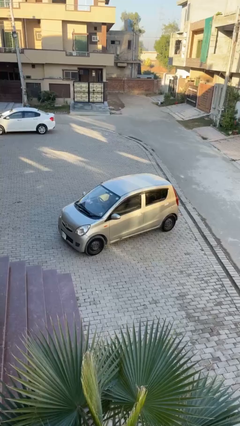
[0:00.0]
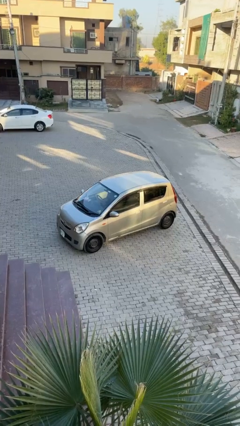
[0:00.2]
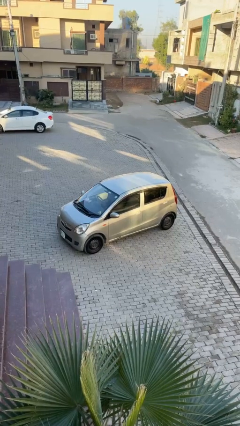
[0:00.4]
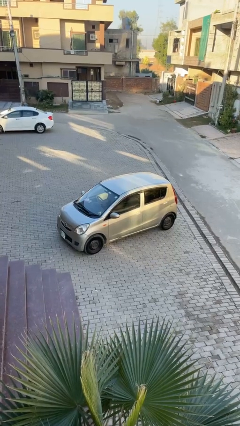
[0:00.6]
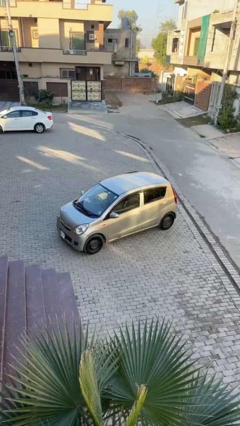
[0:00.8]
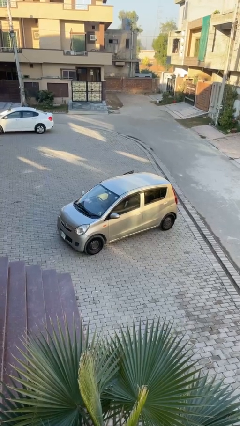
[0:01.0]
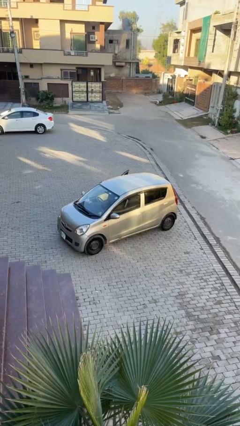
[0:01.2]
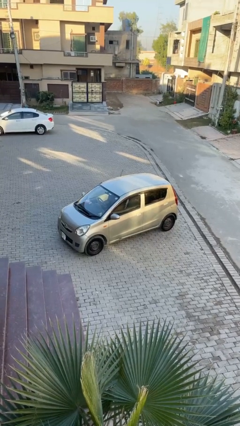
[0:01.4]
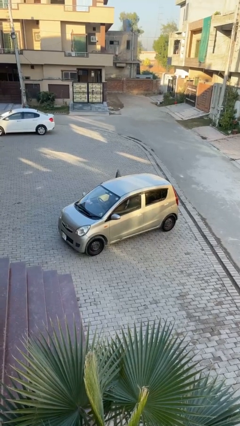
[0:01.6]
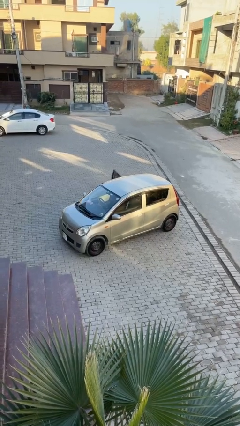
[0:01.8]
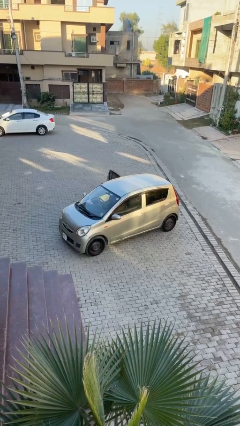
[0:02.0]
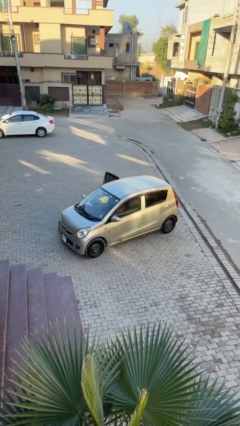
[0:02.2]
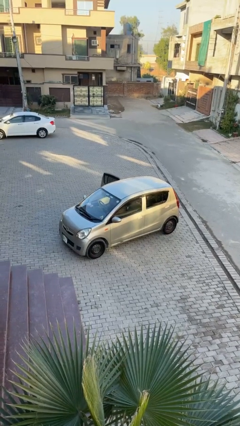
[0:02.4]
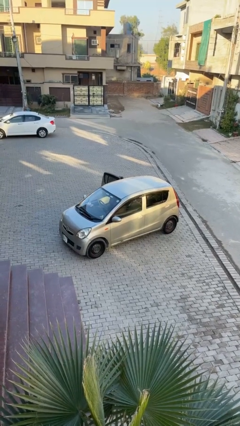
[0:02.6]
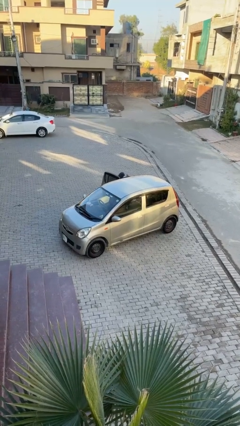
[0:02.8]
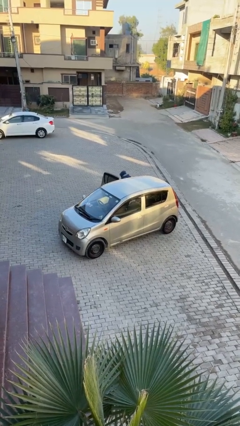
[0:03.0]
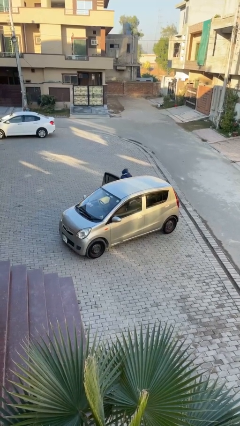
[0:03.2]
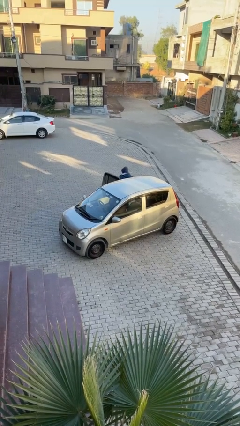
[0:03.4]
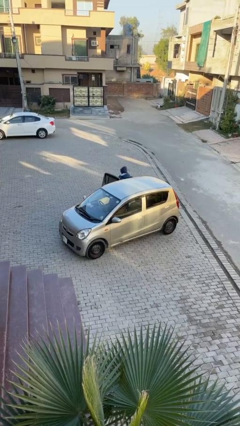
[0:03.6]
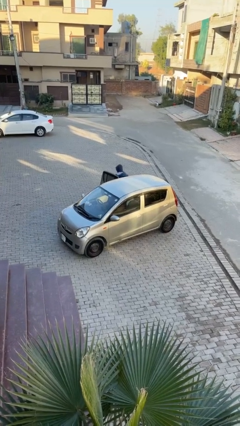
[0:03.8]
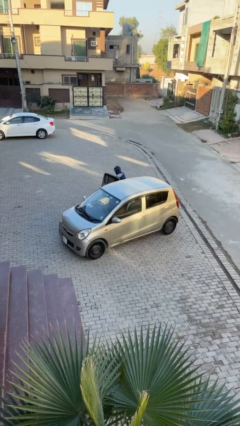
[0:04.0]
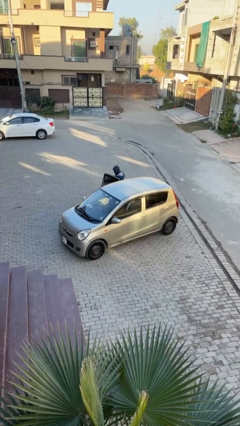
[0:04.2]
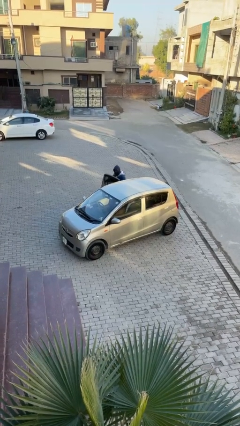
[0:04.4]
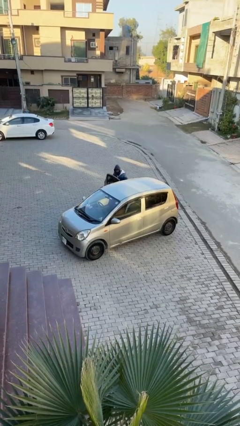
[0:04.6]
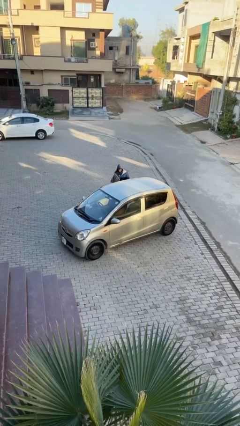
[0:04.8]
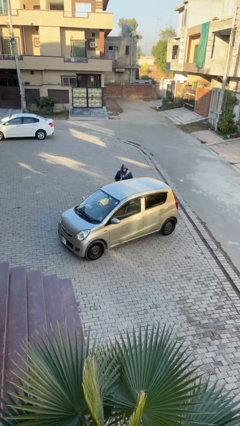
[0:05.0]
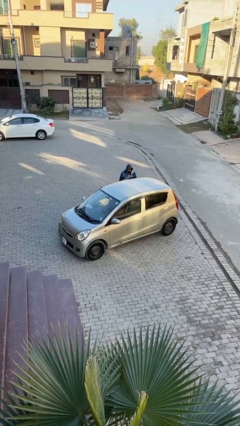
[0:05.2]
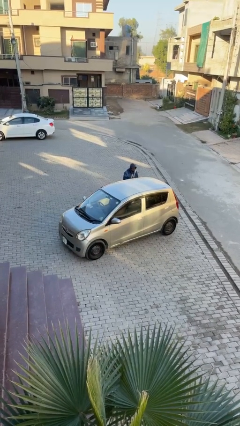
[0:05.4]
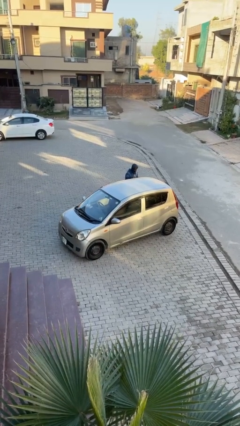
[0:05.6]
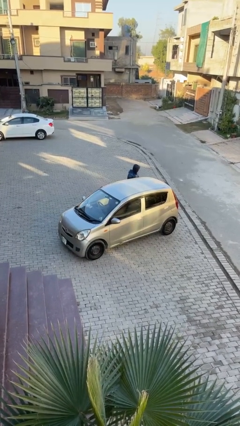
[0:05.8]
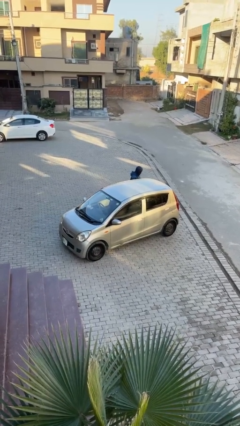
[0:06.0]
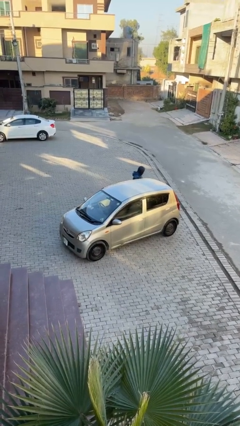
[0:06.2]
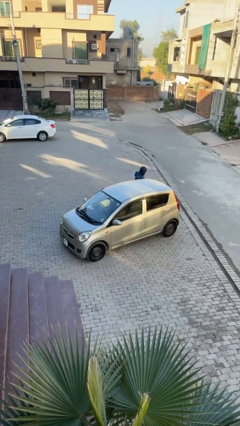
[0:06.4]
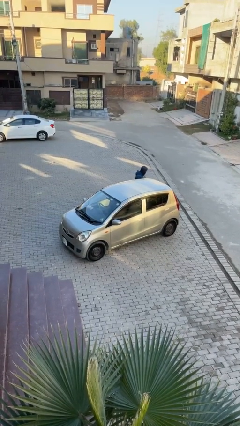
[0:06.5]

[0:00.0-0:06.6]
car drops off person

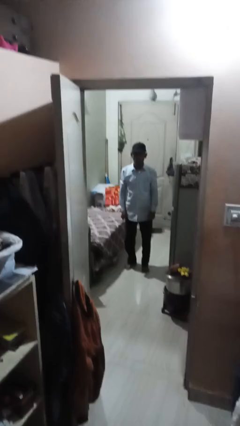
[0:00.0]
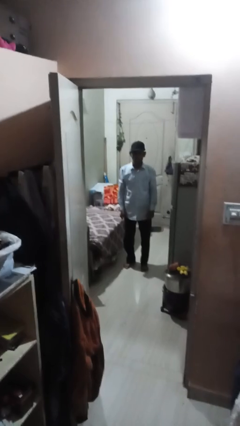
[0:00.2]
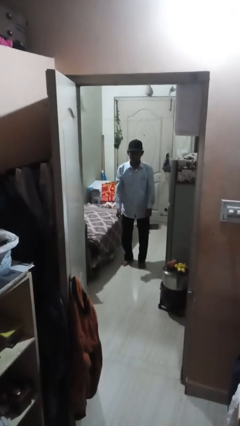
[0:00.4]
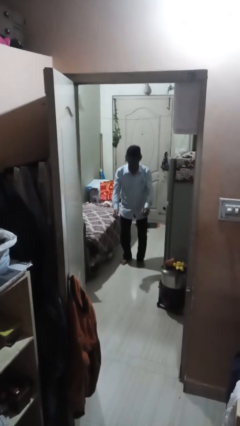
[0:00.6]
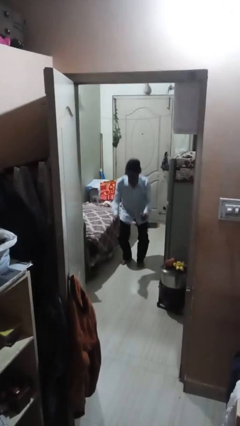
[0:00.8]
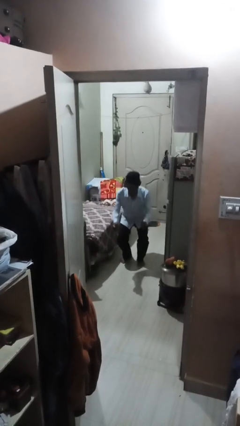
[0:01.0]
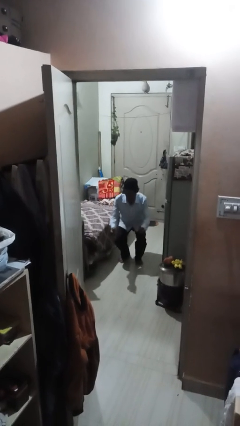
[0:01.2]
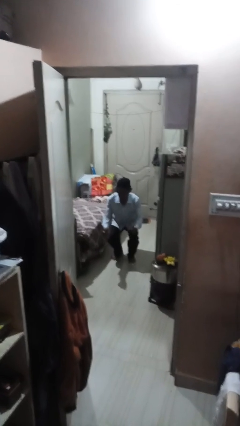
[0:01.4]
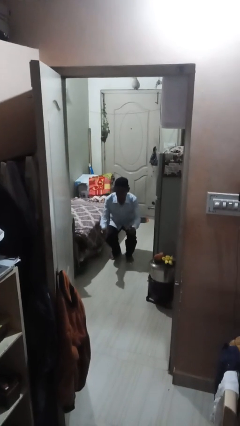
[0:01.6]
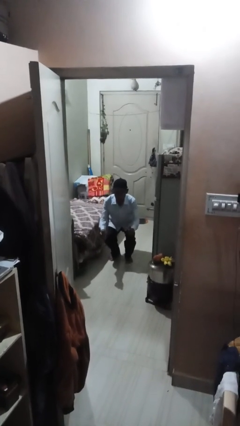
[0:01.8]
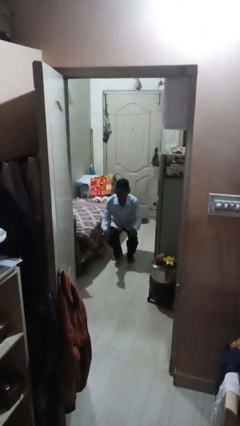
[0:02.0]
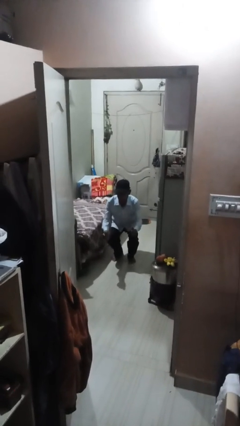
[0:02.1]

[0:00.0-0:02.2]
person squats

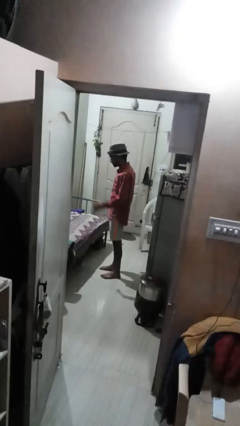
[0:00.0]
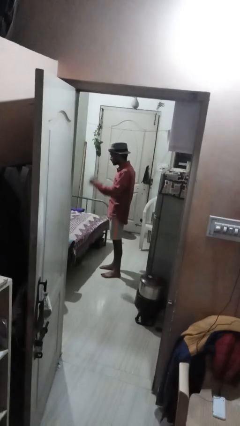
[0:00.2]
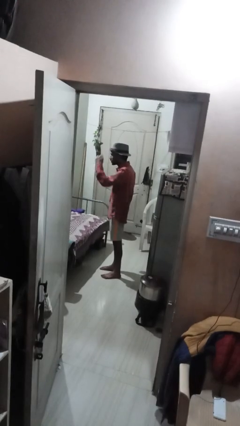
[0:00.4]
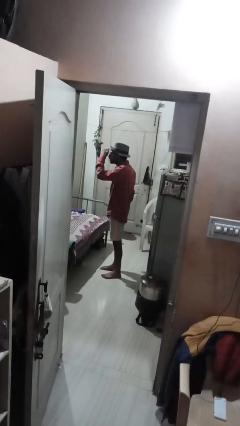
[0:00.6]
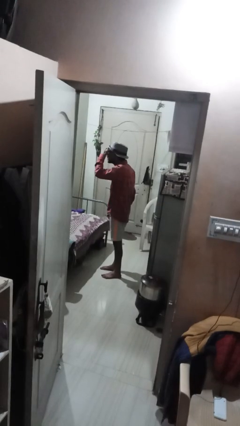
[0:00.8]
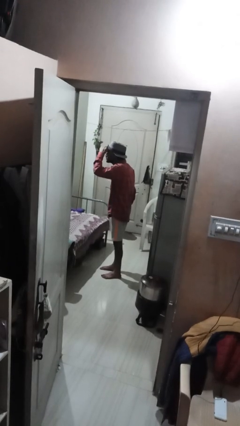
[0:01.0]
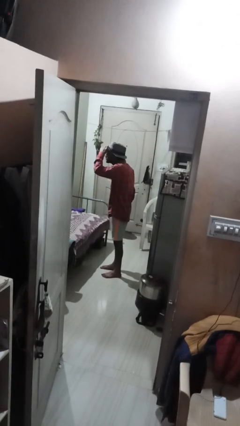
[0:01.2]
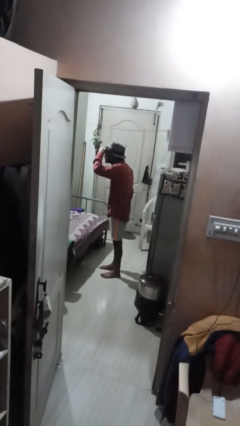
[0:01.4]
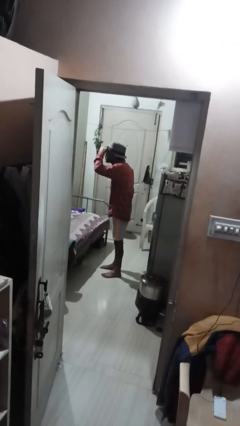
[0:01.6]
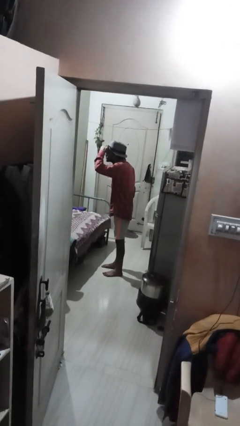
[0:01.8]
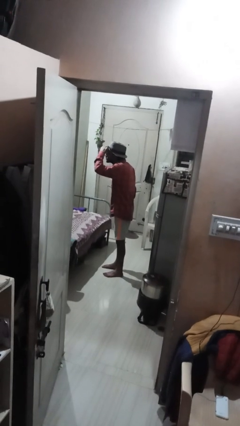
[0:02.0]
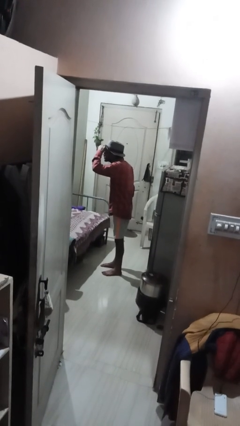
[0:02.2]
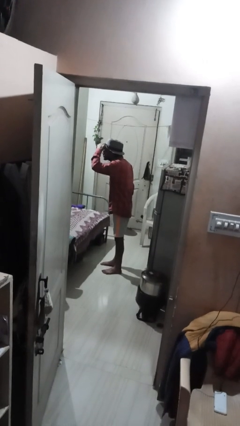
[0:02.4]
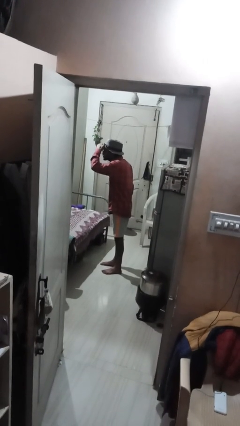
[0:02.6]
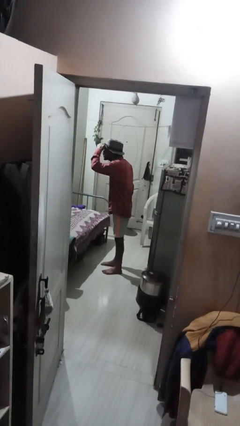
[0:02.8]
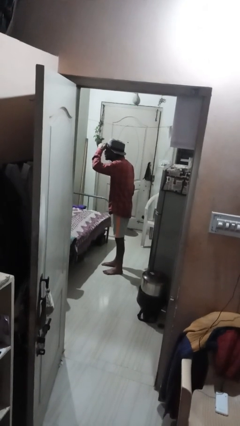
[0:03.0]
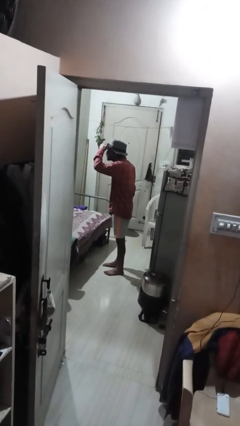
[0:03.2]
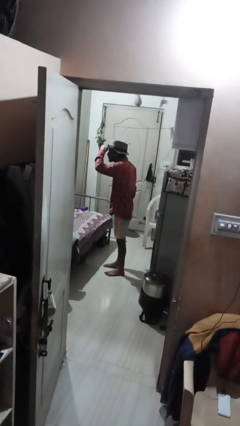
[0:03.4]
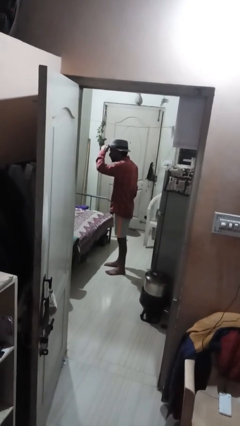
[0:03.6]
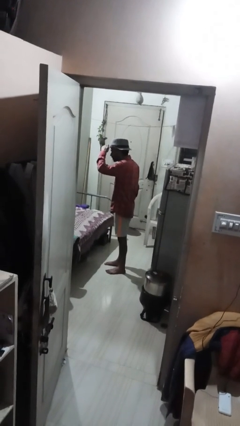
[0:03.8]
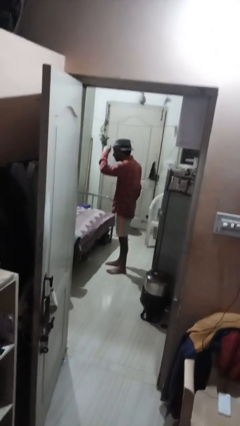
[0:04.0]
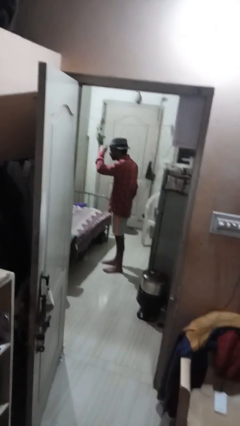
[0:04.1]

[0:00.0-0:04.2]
person shades eyes

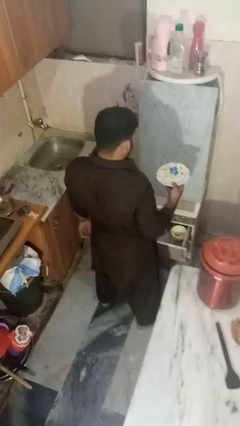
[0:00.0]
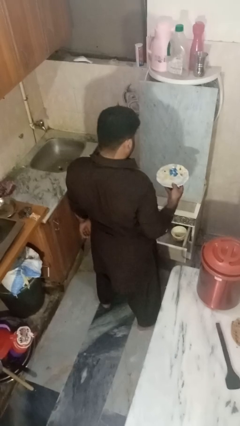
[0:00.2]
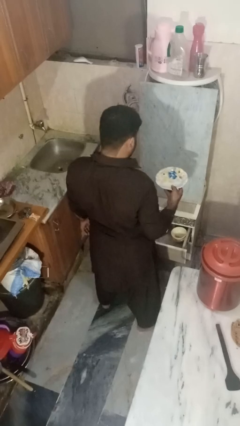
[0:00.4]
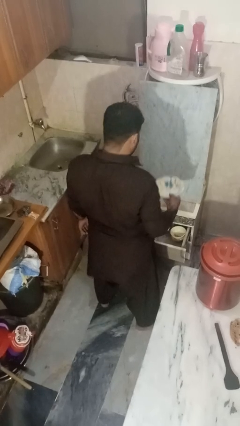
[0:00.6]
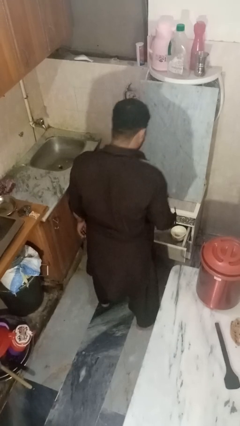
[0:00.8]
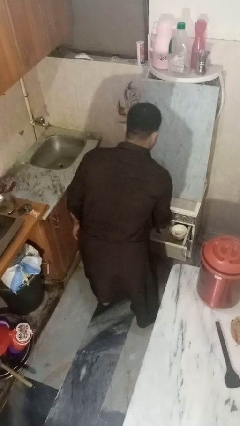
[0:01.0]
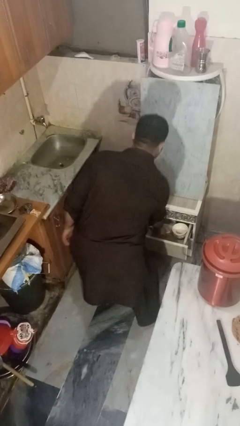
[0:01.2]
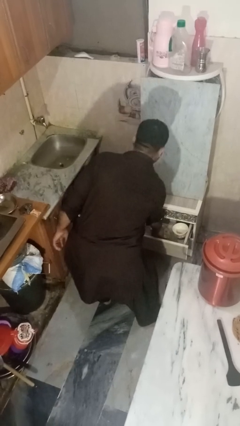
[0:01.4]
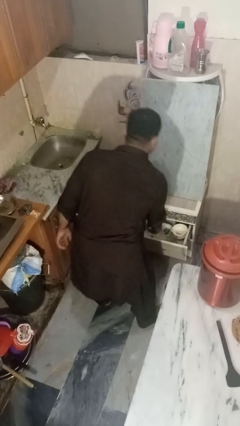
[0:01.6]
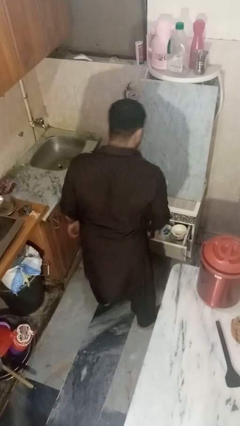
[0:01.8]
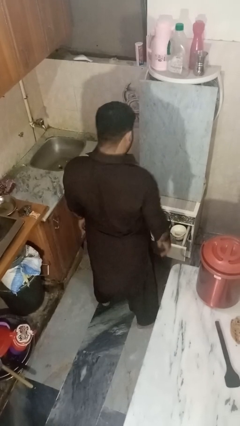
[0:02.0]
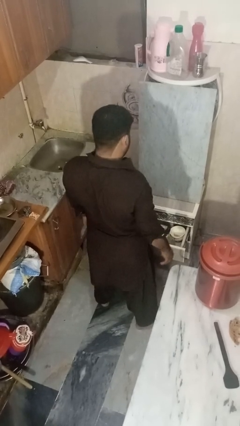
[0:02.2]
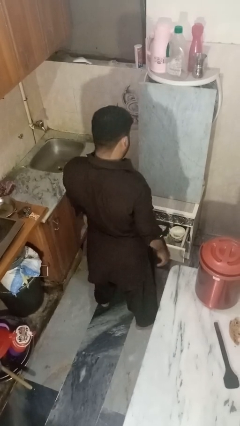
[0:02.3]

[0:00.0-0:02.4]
person puts object into kitchen drawer

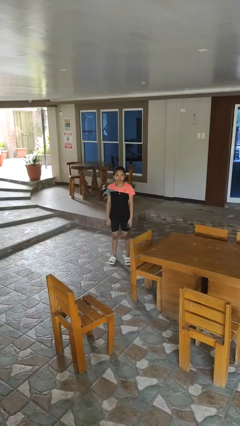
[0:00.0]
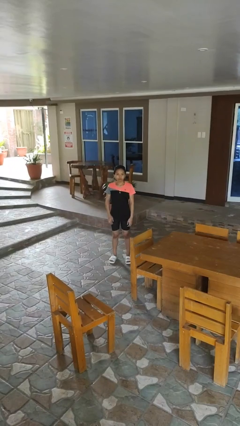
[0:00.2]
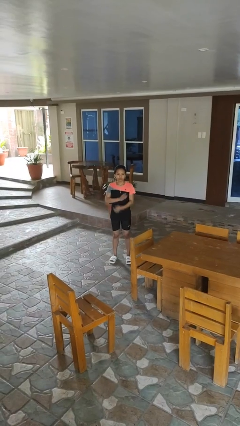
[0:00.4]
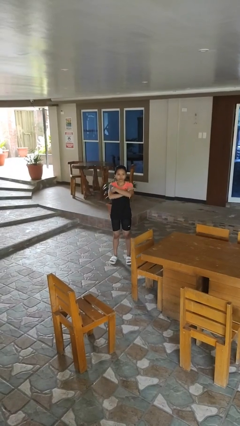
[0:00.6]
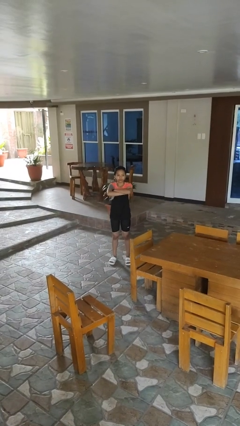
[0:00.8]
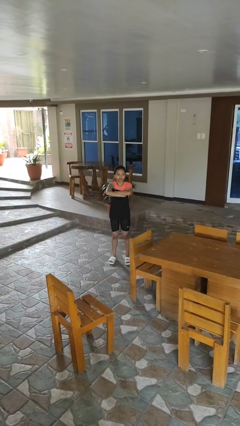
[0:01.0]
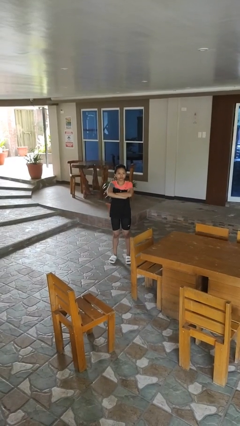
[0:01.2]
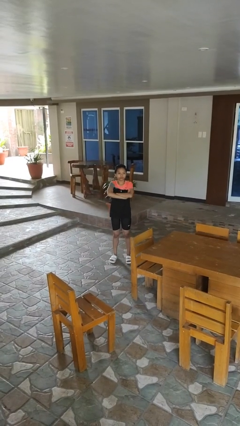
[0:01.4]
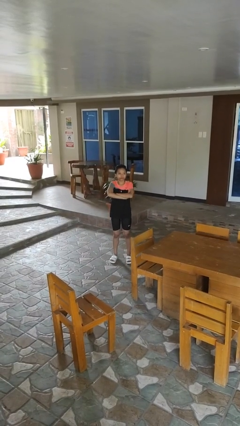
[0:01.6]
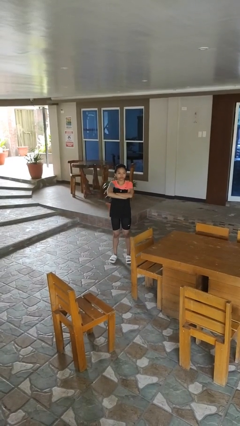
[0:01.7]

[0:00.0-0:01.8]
person crosses arms
